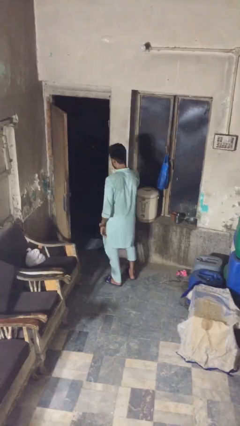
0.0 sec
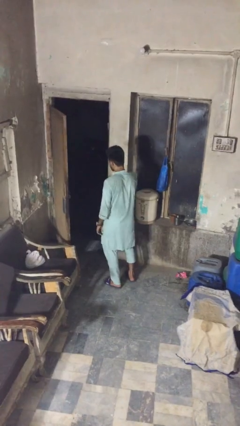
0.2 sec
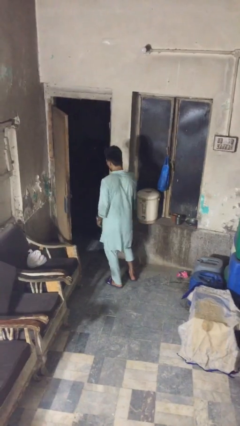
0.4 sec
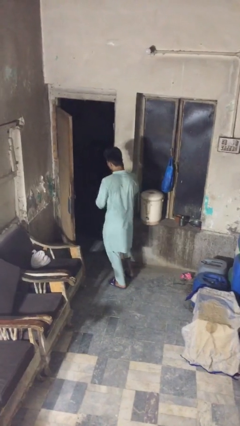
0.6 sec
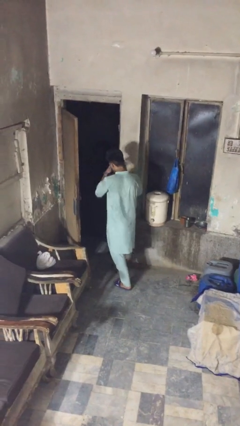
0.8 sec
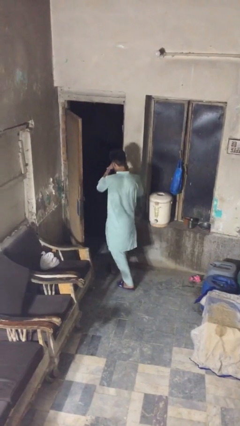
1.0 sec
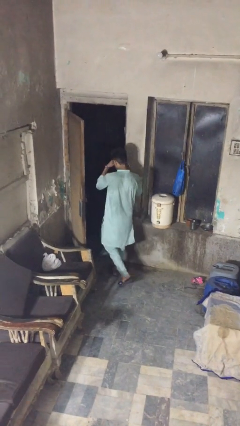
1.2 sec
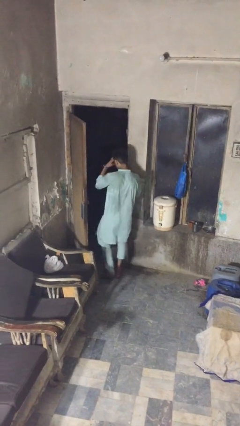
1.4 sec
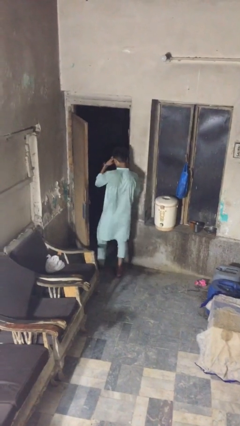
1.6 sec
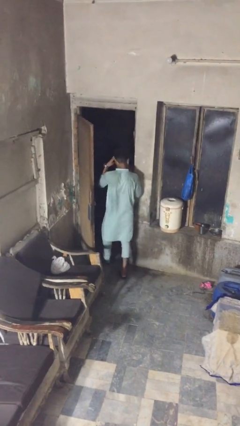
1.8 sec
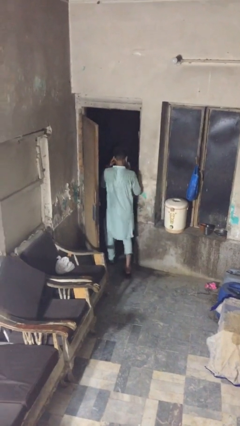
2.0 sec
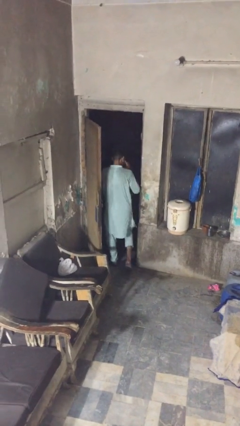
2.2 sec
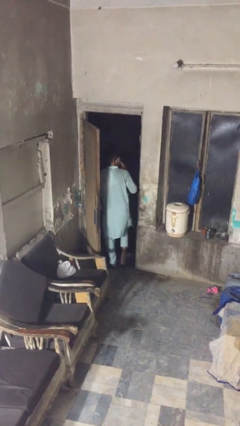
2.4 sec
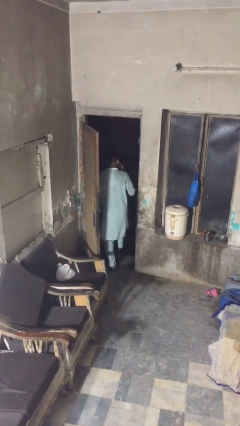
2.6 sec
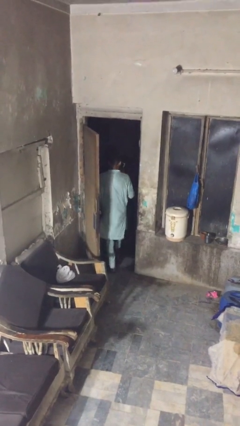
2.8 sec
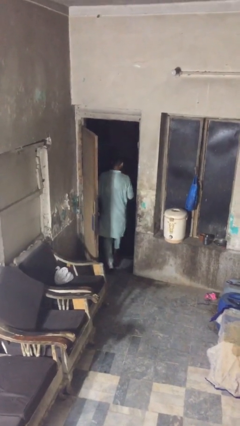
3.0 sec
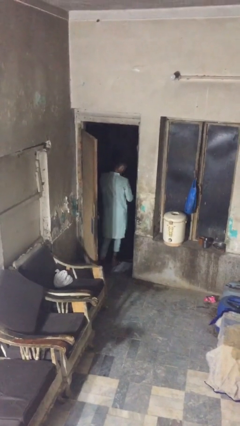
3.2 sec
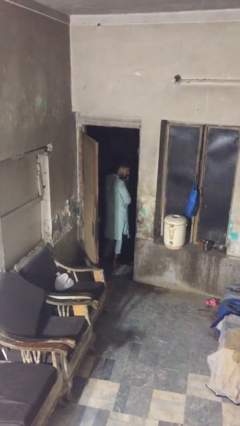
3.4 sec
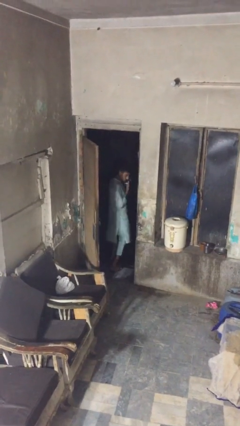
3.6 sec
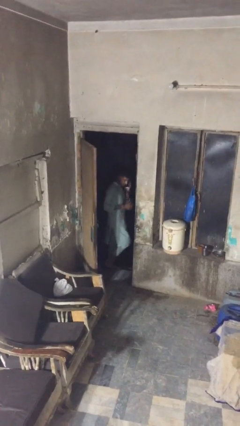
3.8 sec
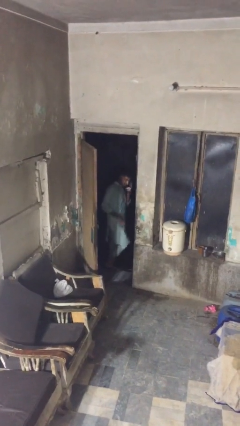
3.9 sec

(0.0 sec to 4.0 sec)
person exits scene through structure

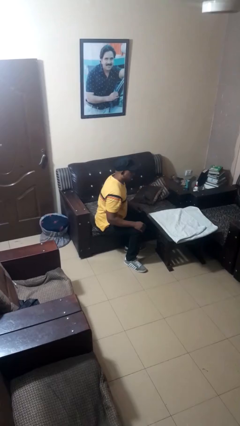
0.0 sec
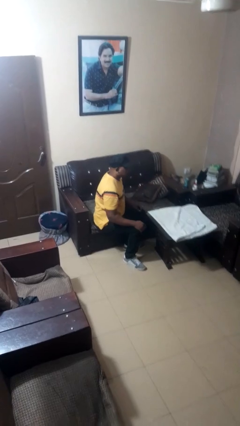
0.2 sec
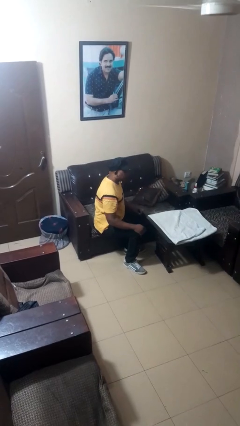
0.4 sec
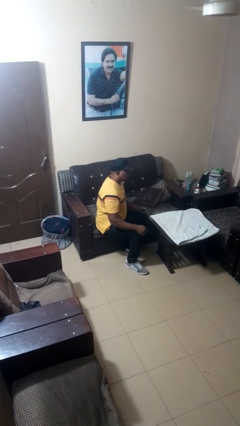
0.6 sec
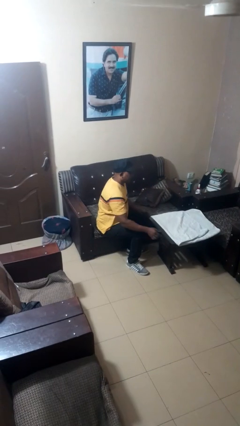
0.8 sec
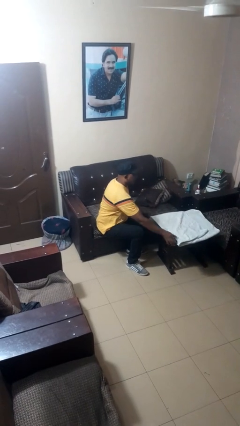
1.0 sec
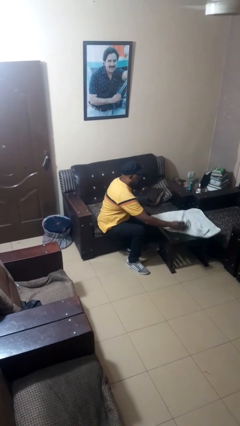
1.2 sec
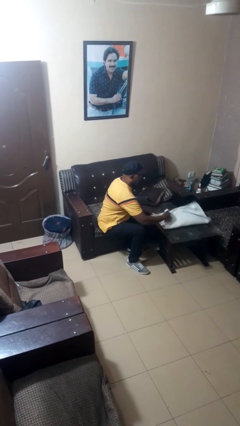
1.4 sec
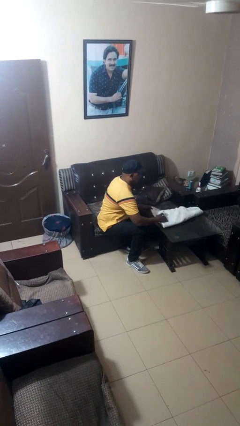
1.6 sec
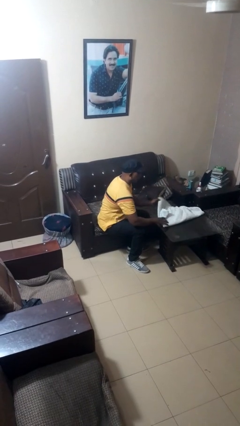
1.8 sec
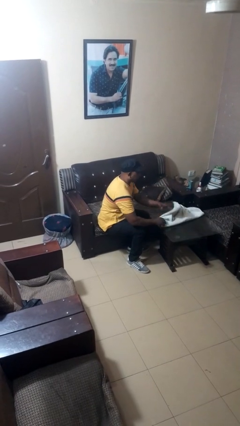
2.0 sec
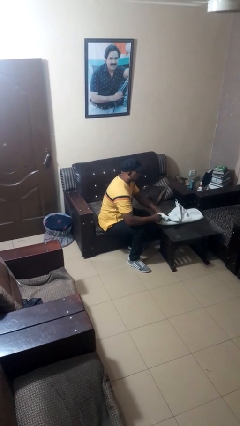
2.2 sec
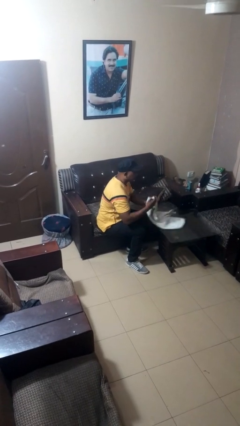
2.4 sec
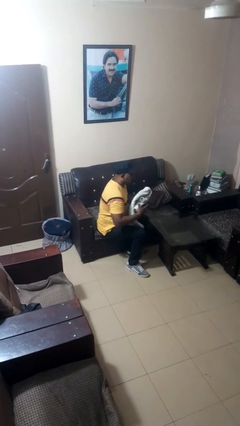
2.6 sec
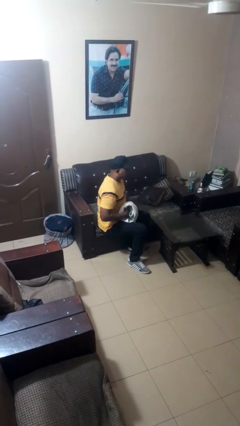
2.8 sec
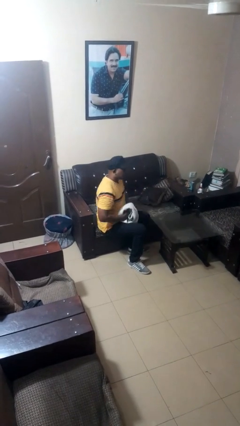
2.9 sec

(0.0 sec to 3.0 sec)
person folds tablecloth

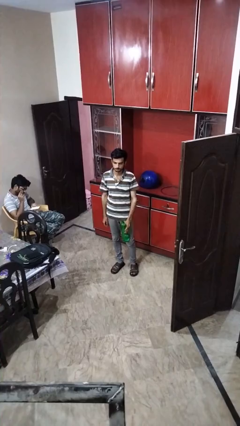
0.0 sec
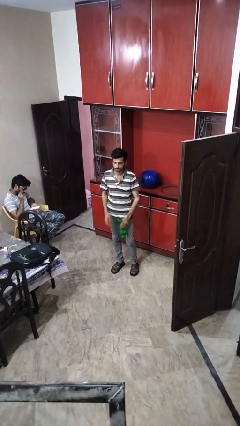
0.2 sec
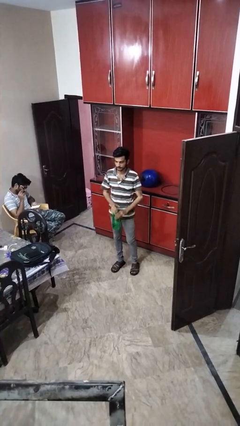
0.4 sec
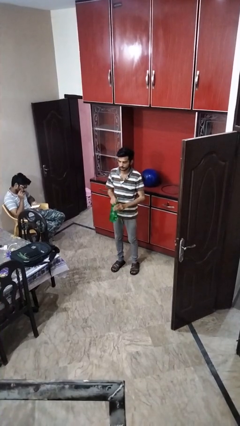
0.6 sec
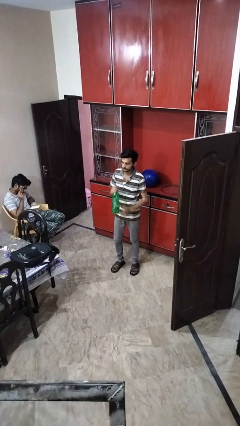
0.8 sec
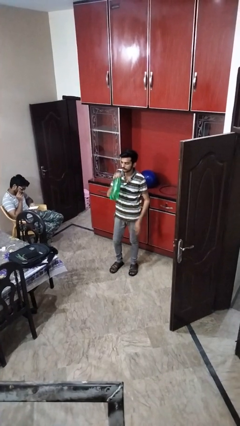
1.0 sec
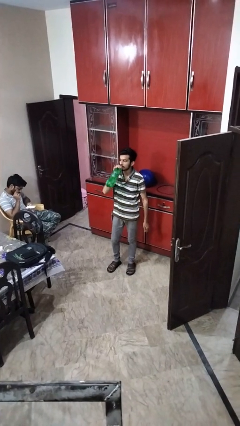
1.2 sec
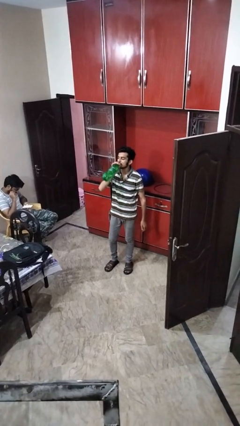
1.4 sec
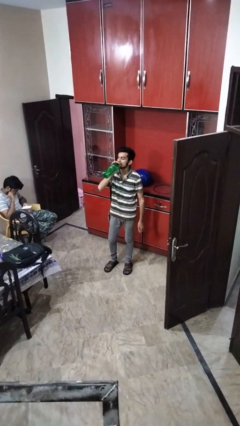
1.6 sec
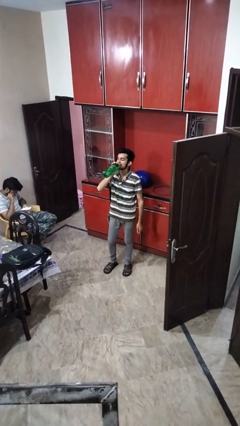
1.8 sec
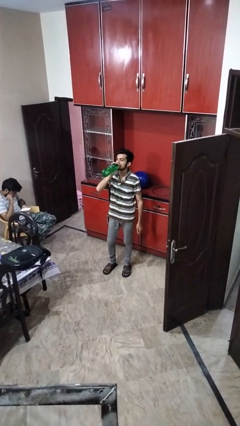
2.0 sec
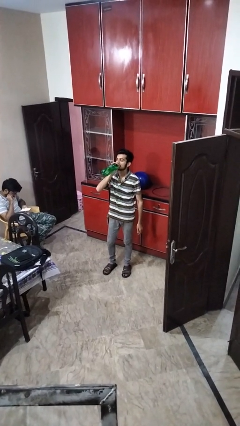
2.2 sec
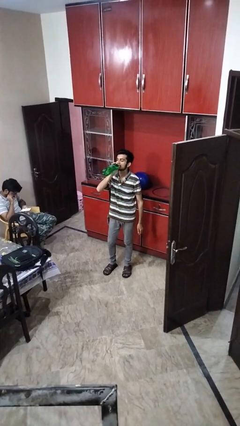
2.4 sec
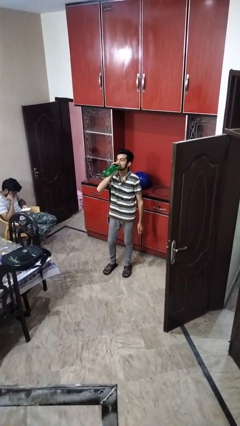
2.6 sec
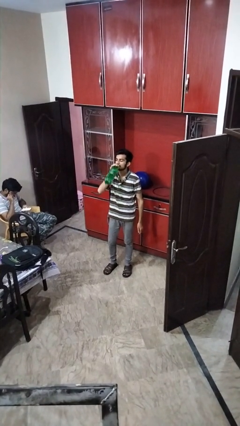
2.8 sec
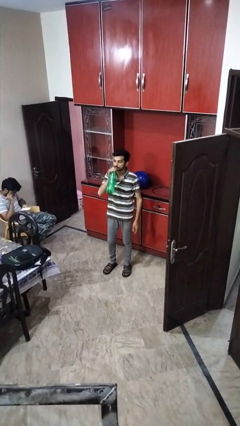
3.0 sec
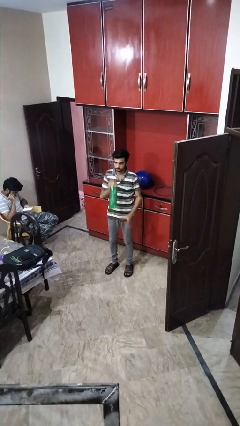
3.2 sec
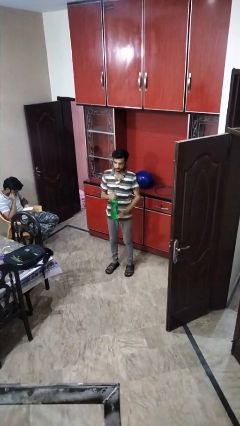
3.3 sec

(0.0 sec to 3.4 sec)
person drinks from bottle

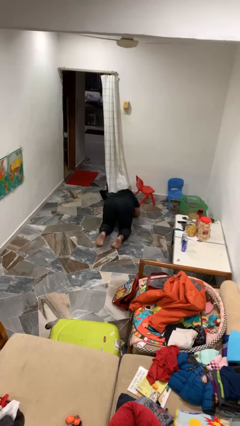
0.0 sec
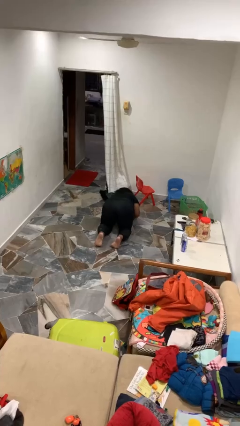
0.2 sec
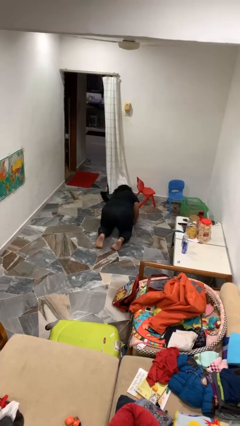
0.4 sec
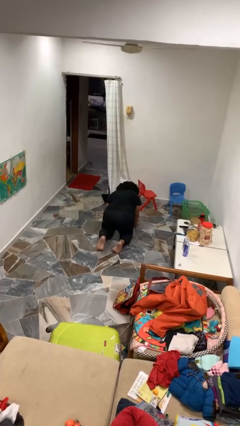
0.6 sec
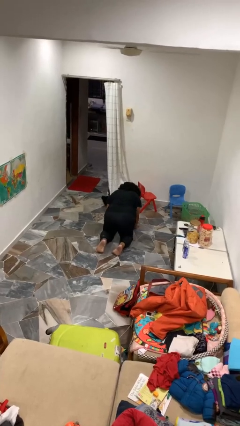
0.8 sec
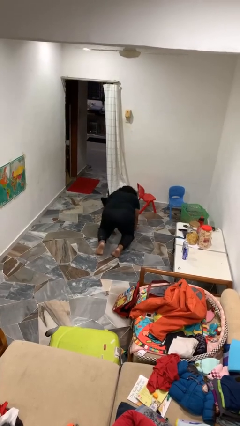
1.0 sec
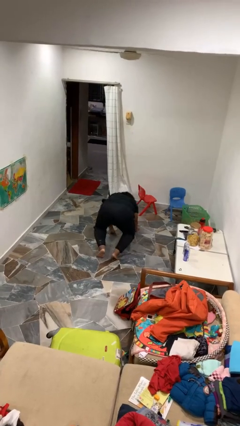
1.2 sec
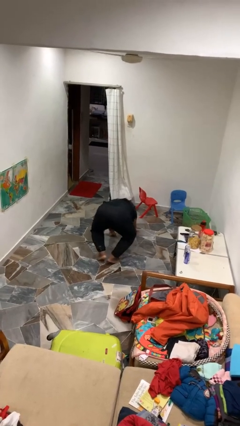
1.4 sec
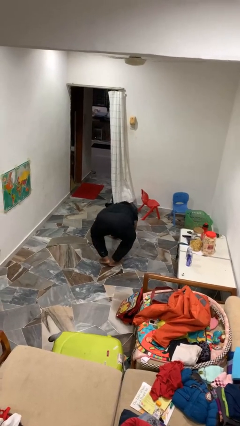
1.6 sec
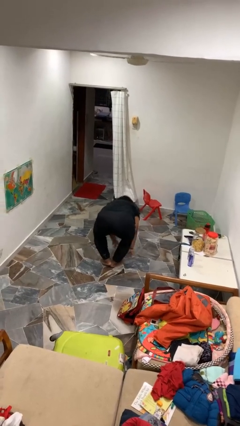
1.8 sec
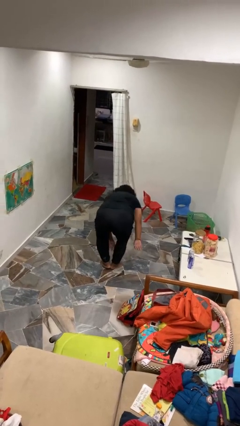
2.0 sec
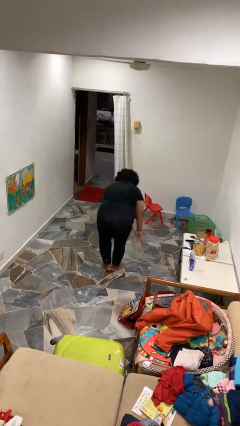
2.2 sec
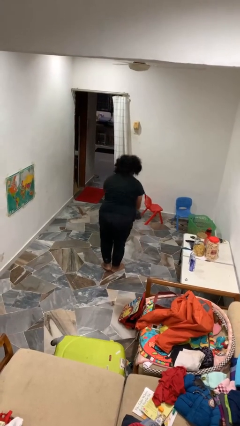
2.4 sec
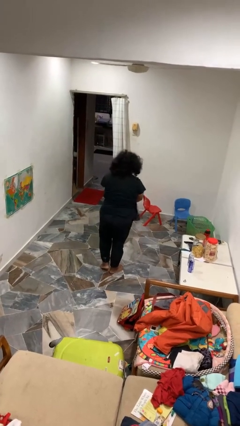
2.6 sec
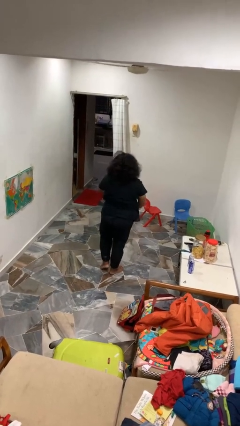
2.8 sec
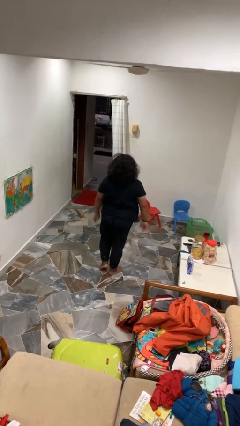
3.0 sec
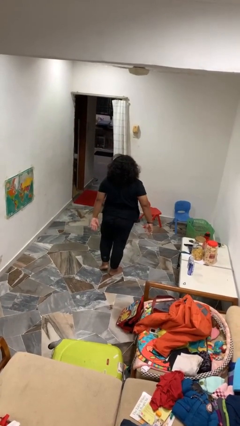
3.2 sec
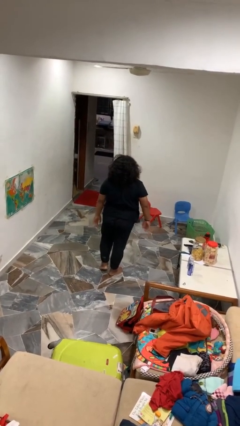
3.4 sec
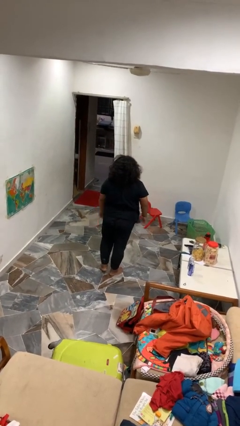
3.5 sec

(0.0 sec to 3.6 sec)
person stands up from floor

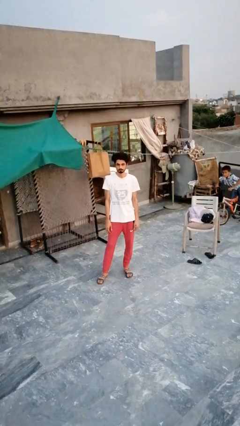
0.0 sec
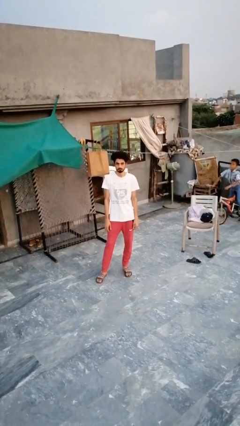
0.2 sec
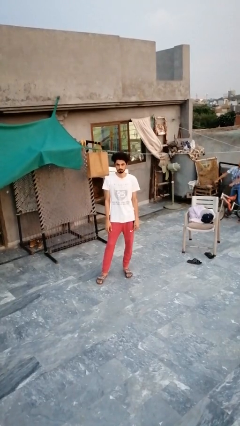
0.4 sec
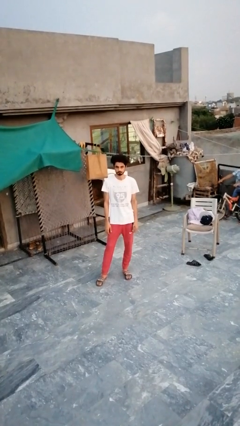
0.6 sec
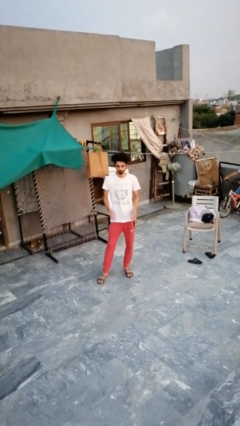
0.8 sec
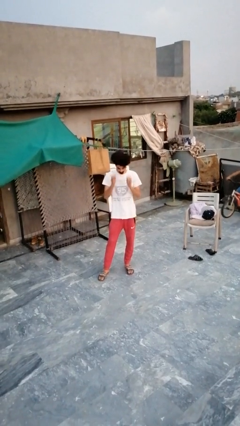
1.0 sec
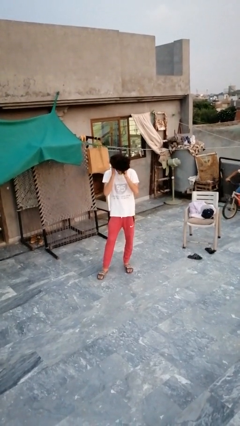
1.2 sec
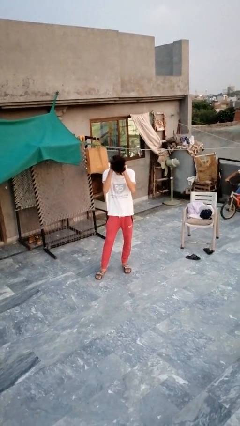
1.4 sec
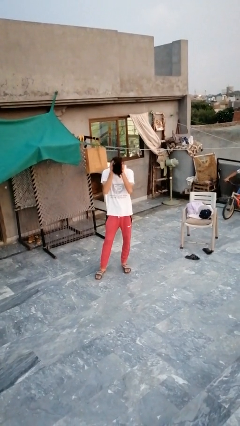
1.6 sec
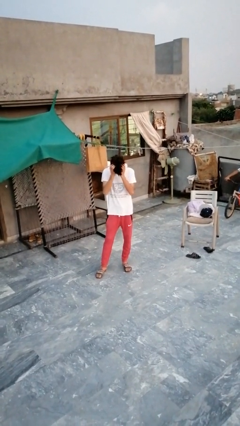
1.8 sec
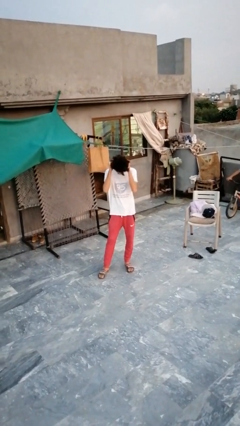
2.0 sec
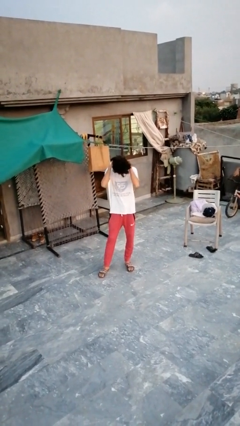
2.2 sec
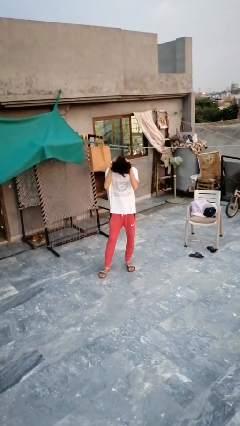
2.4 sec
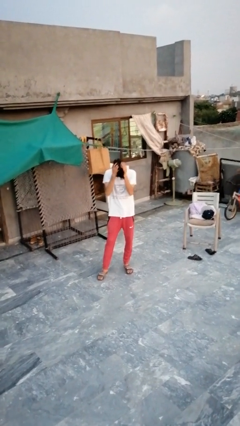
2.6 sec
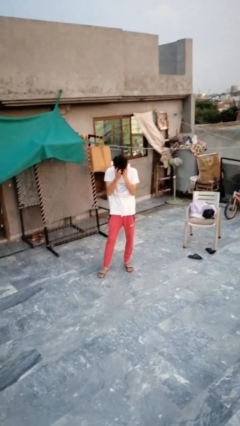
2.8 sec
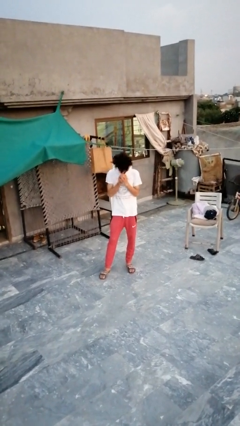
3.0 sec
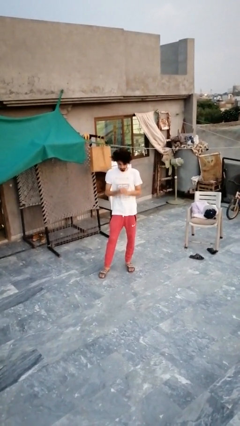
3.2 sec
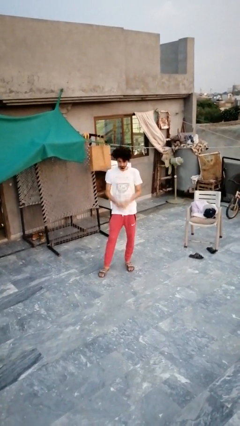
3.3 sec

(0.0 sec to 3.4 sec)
person strokes hair

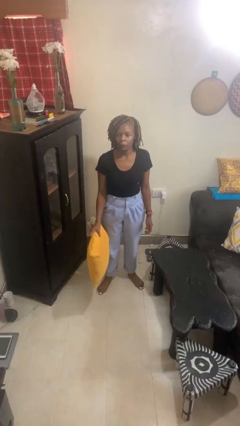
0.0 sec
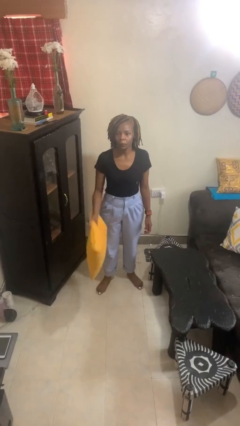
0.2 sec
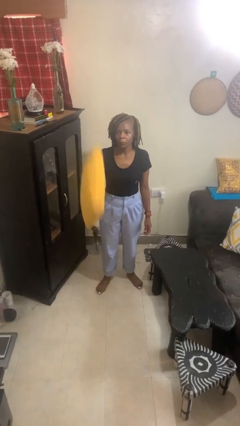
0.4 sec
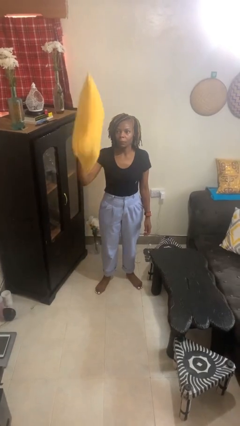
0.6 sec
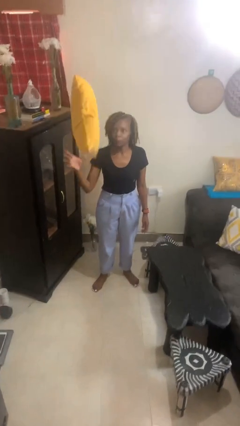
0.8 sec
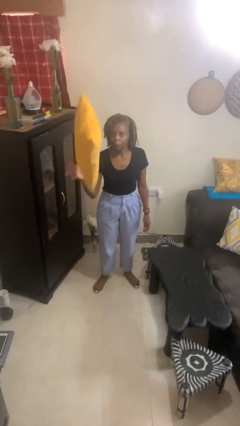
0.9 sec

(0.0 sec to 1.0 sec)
person drops object
